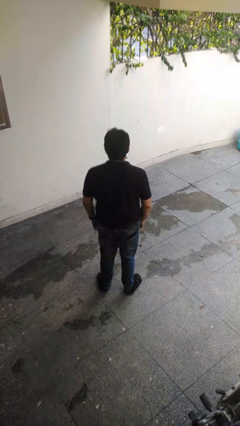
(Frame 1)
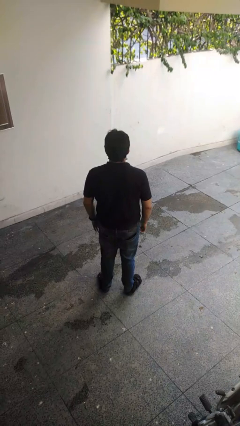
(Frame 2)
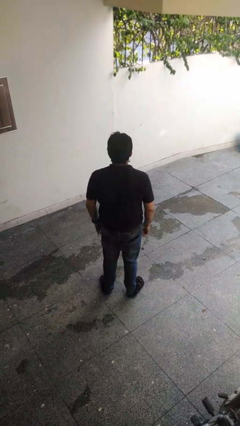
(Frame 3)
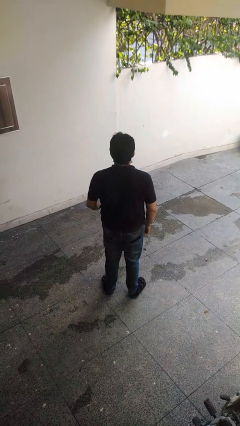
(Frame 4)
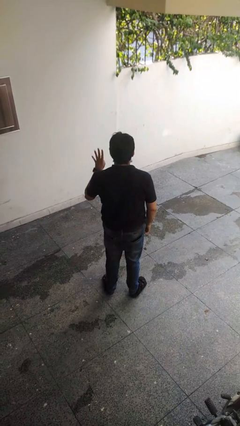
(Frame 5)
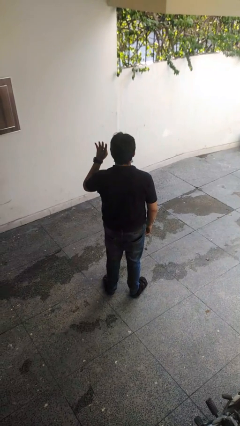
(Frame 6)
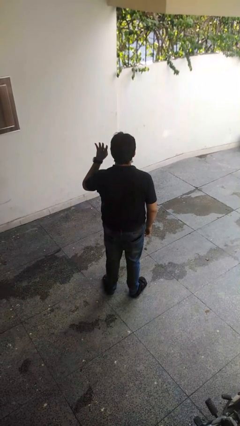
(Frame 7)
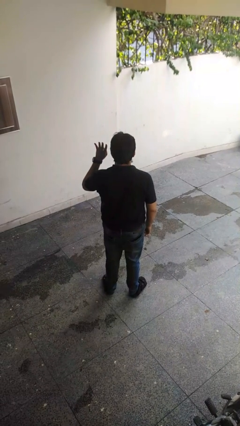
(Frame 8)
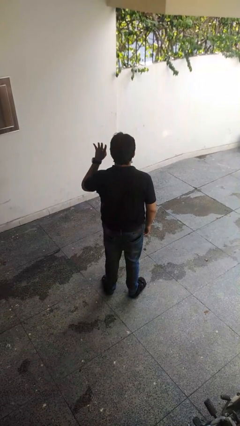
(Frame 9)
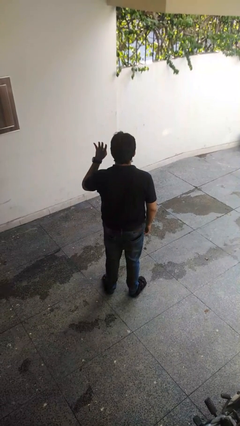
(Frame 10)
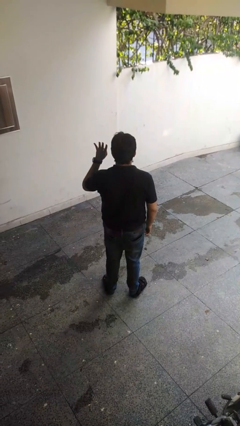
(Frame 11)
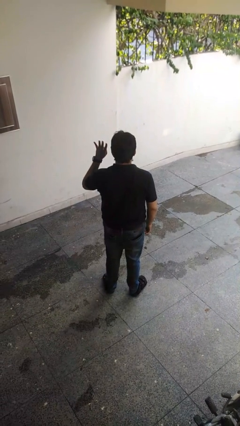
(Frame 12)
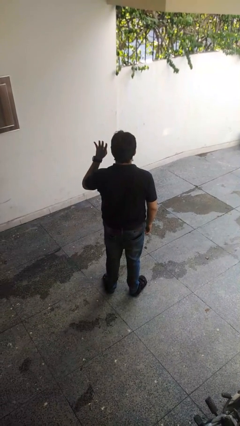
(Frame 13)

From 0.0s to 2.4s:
person gestures number four

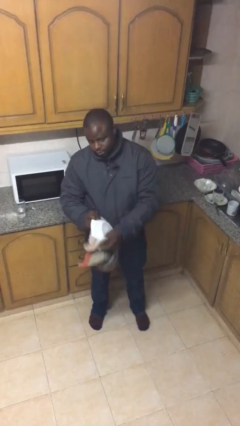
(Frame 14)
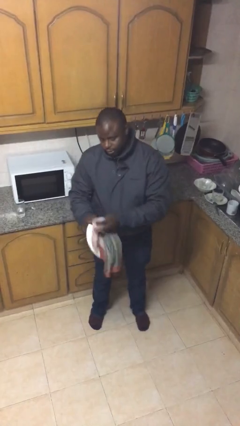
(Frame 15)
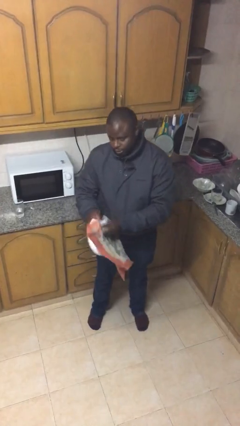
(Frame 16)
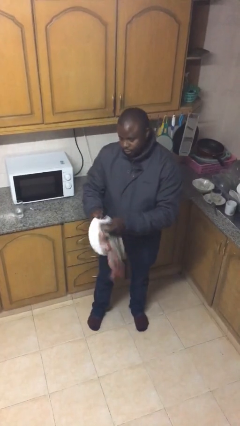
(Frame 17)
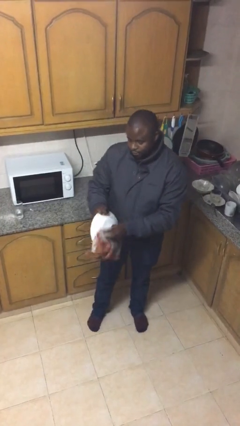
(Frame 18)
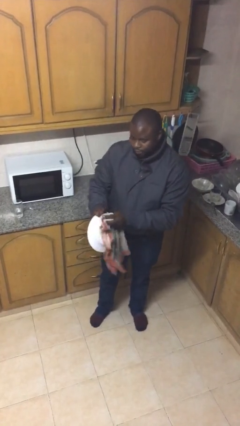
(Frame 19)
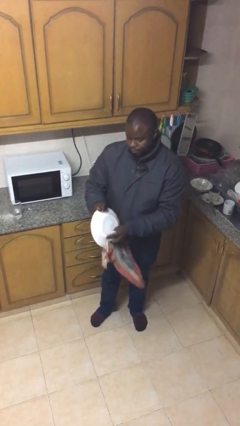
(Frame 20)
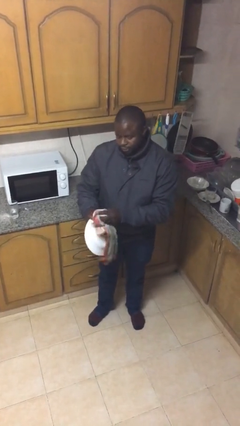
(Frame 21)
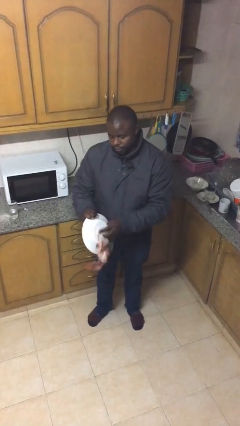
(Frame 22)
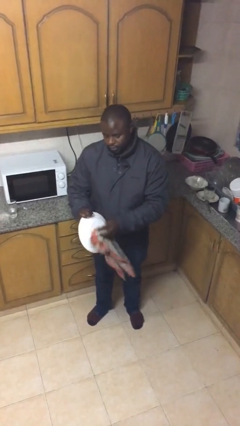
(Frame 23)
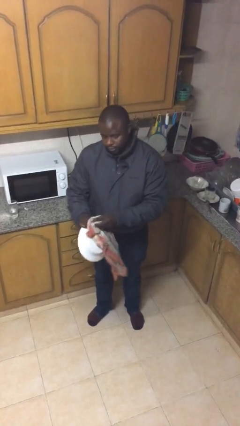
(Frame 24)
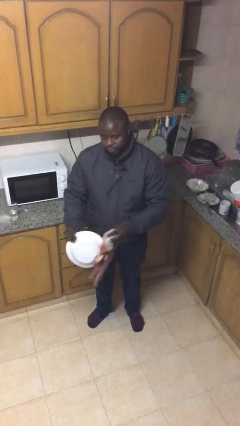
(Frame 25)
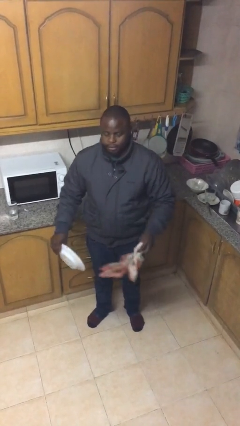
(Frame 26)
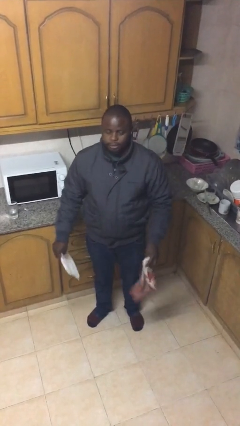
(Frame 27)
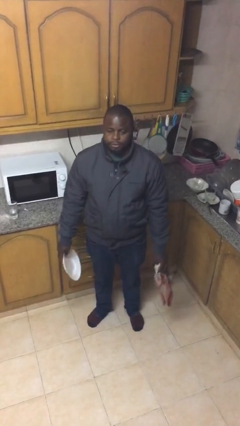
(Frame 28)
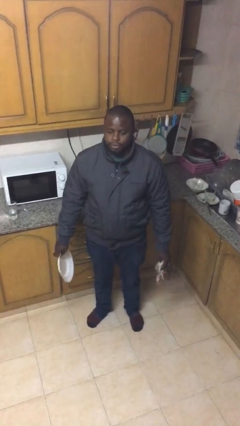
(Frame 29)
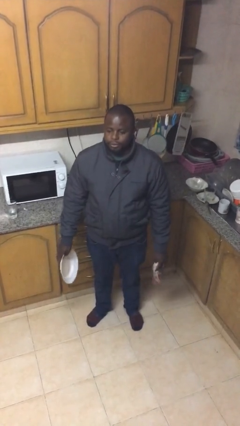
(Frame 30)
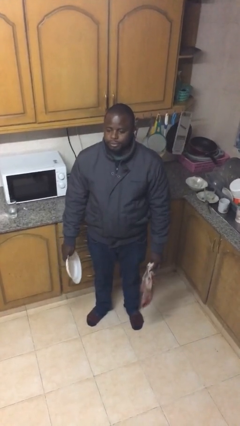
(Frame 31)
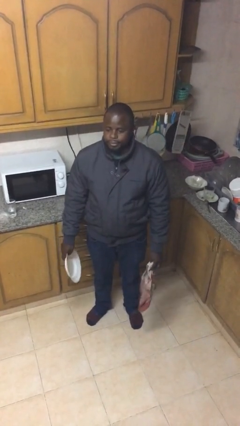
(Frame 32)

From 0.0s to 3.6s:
person dries dish

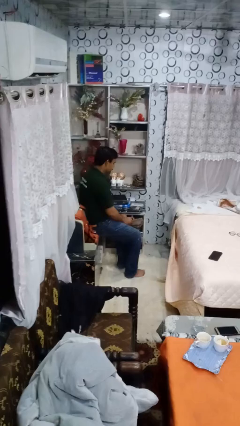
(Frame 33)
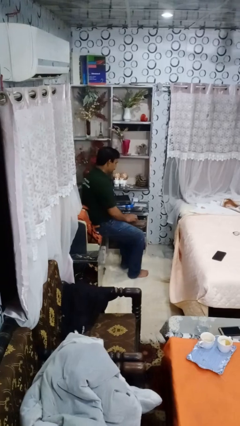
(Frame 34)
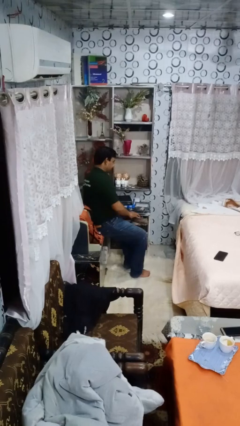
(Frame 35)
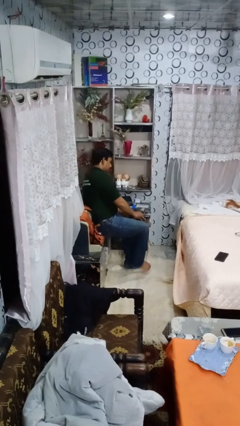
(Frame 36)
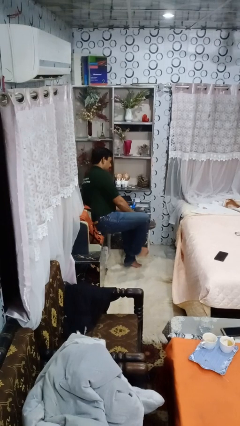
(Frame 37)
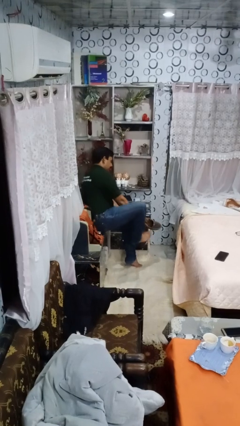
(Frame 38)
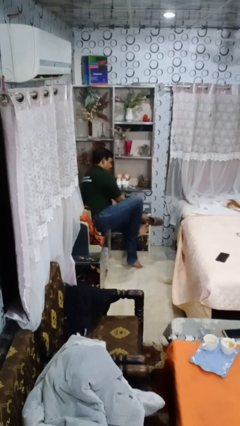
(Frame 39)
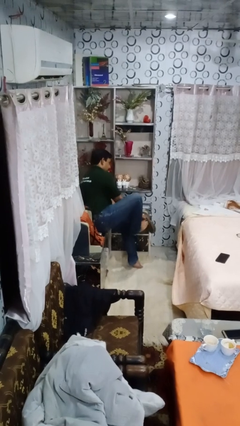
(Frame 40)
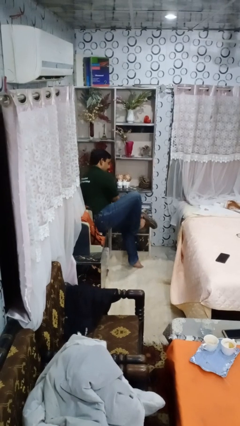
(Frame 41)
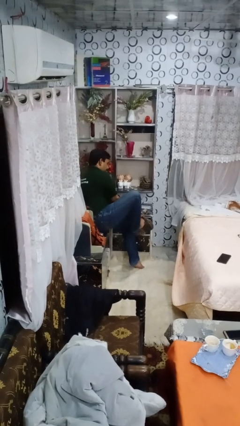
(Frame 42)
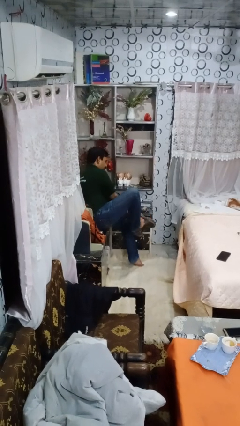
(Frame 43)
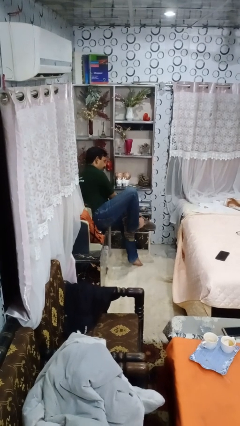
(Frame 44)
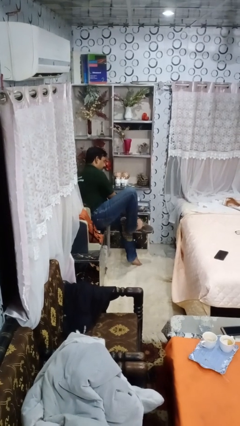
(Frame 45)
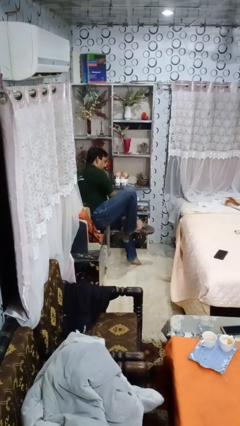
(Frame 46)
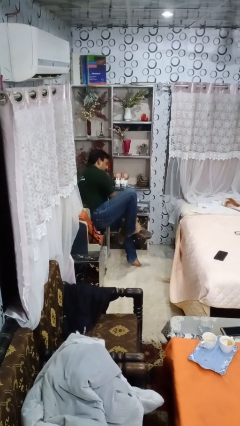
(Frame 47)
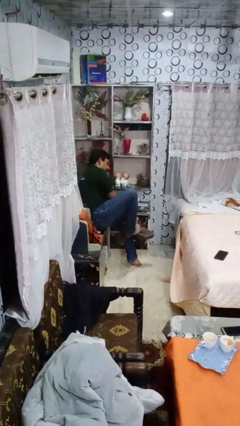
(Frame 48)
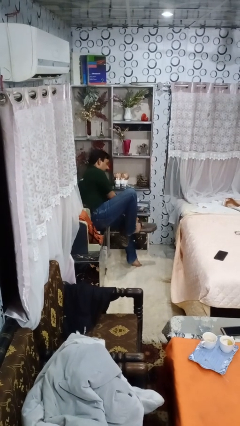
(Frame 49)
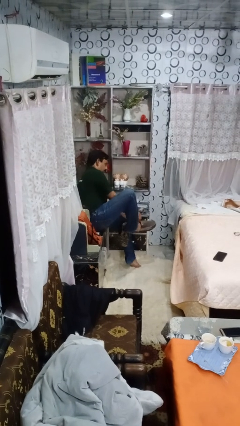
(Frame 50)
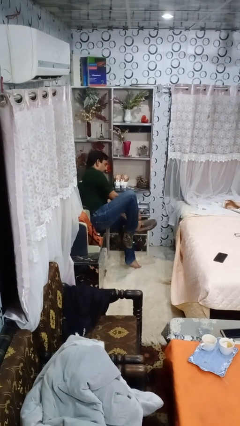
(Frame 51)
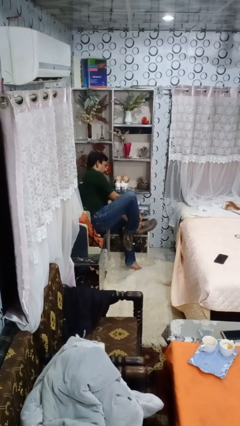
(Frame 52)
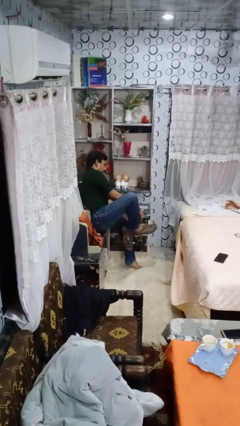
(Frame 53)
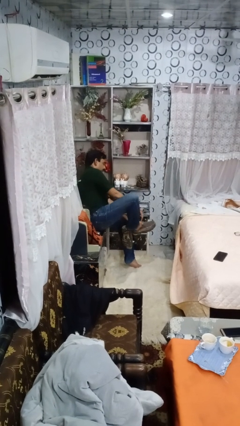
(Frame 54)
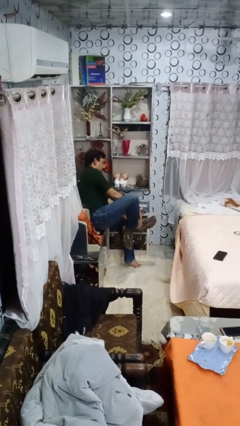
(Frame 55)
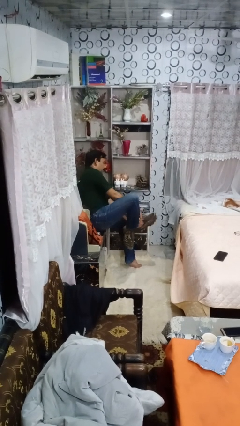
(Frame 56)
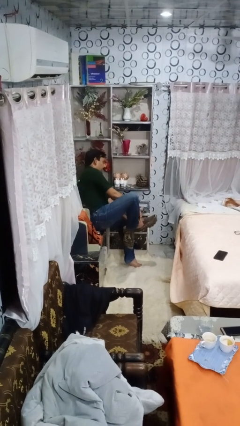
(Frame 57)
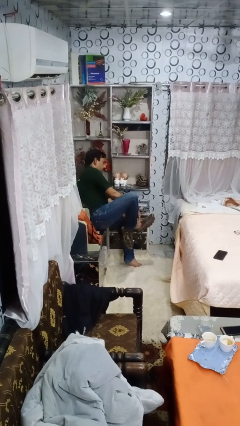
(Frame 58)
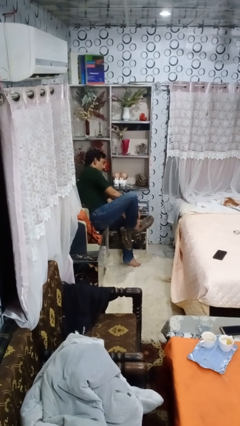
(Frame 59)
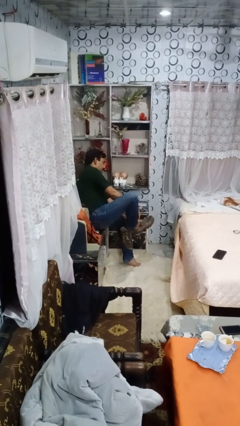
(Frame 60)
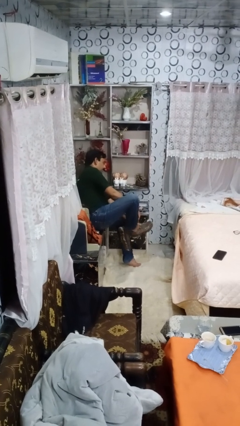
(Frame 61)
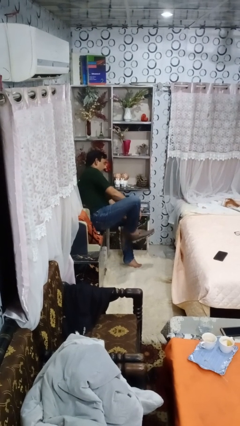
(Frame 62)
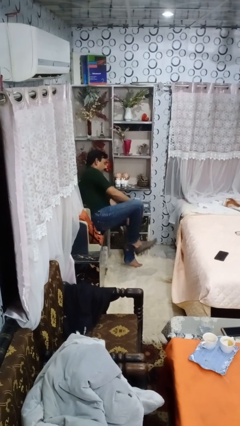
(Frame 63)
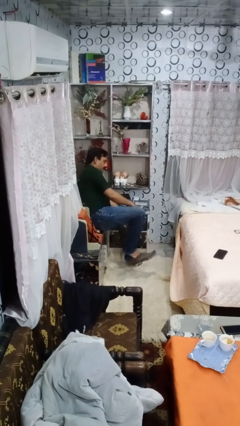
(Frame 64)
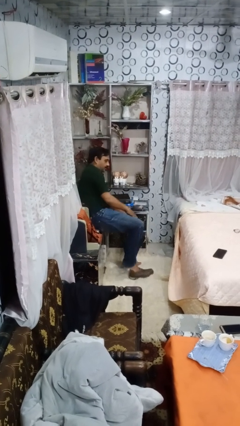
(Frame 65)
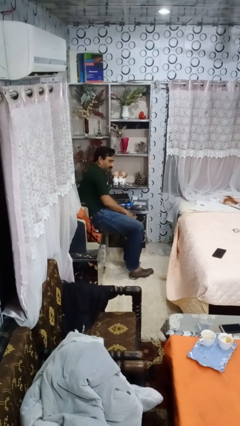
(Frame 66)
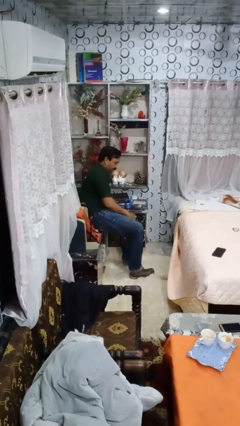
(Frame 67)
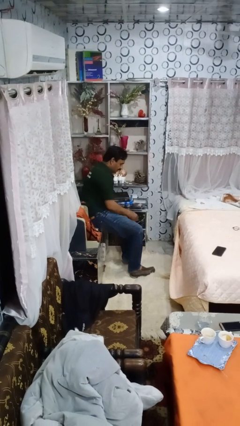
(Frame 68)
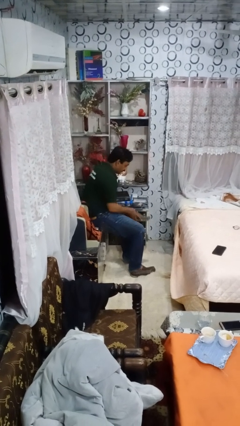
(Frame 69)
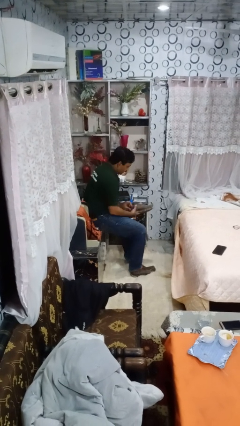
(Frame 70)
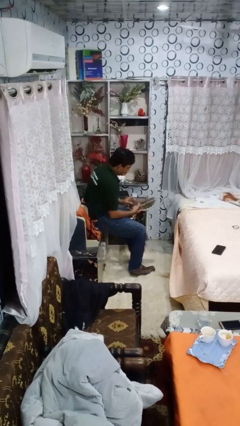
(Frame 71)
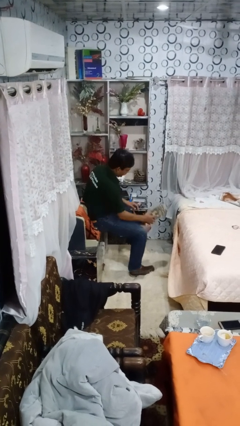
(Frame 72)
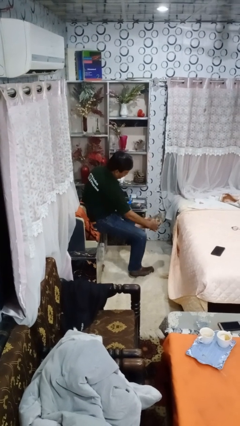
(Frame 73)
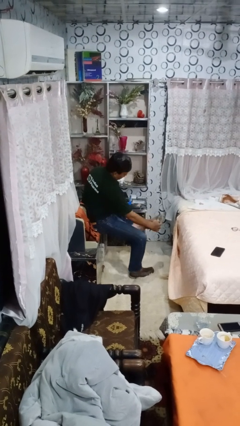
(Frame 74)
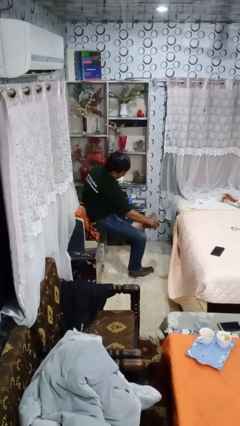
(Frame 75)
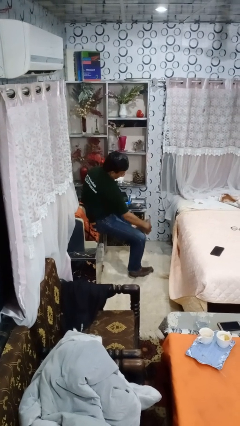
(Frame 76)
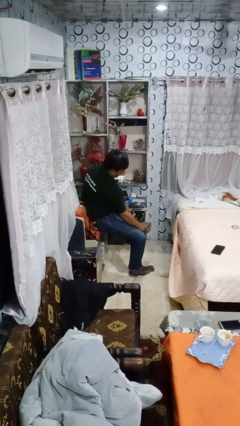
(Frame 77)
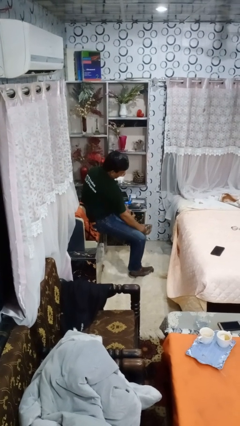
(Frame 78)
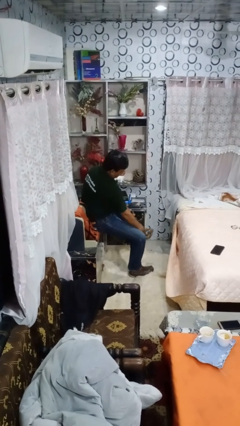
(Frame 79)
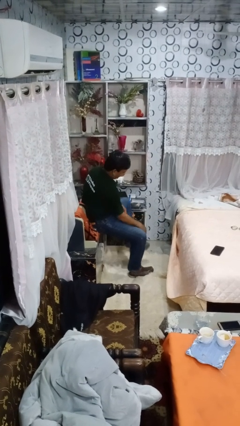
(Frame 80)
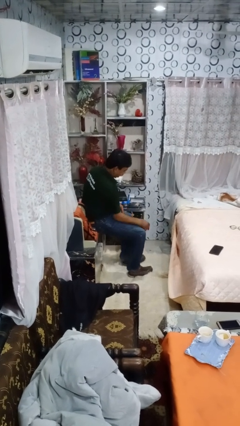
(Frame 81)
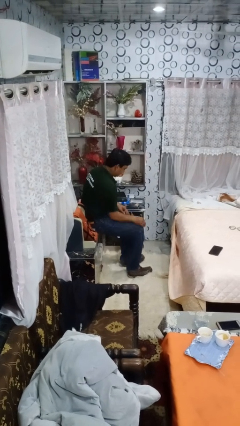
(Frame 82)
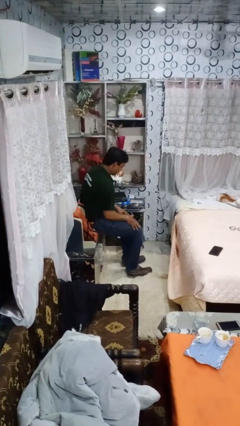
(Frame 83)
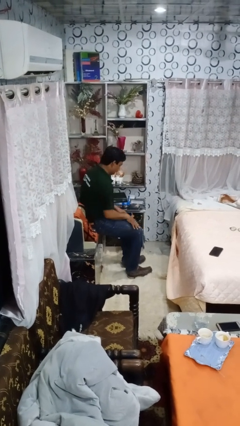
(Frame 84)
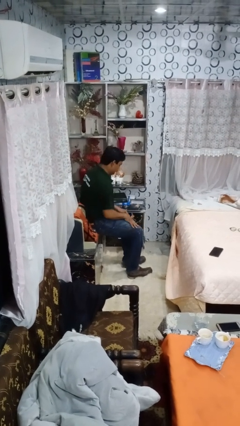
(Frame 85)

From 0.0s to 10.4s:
person puts on shoes

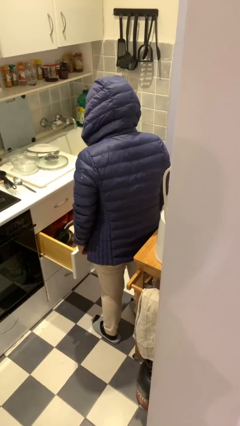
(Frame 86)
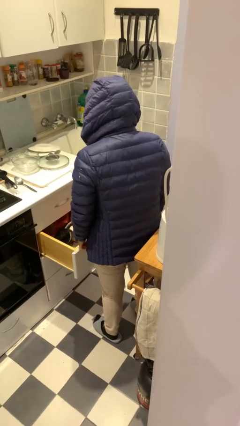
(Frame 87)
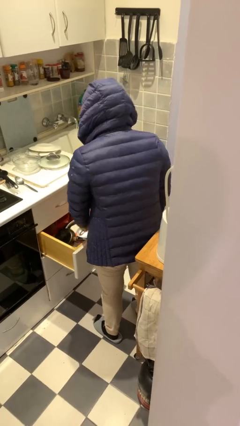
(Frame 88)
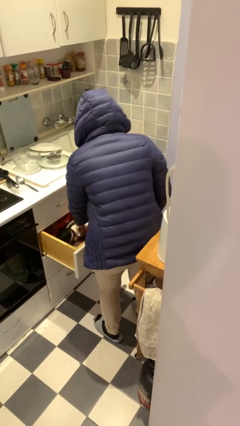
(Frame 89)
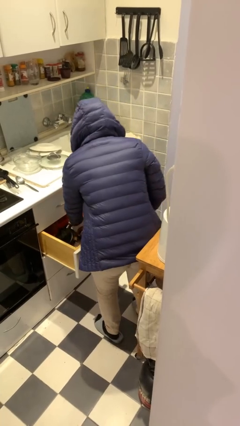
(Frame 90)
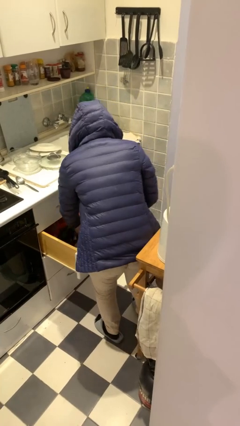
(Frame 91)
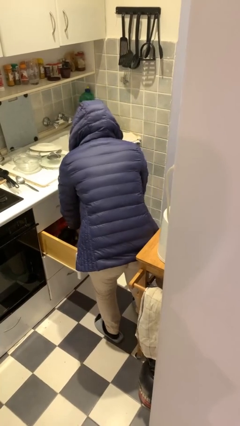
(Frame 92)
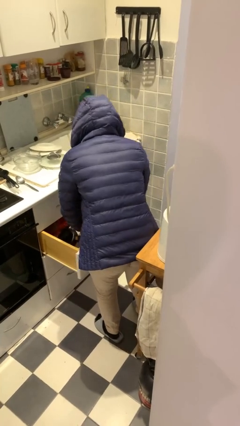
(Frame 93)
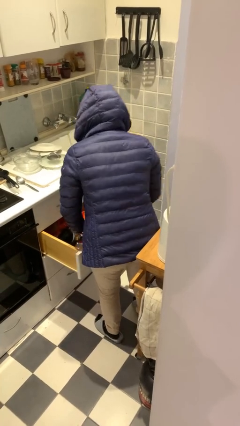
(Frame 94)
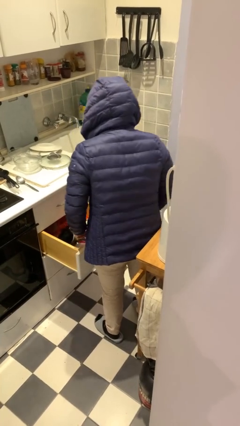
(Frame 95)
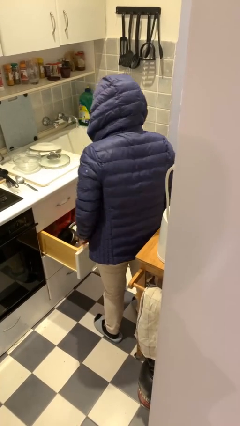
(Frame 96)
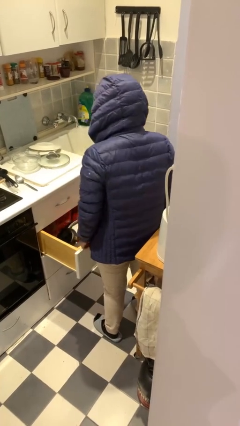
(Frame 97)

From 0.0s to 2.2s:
person searches in kitchen drawer
